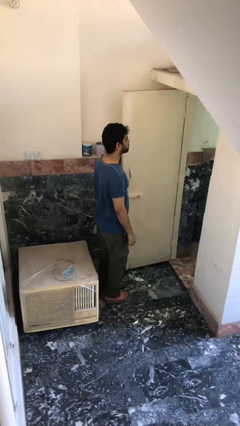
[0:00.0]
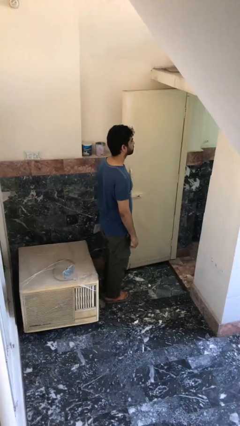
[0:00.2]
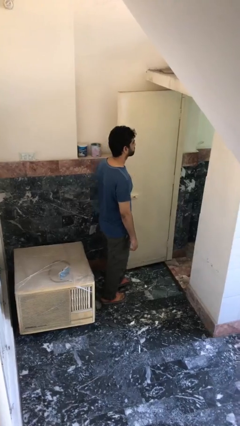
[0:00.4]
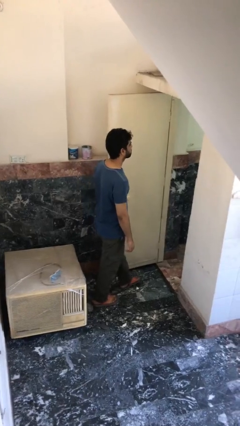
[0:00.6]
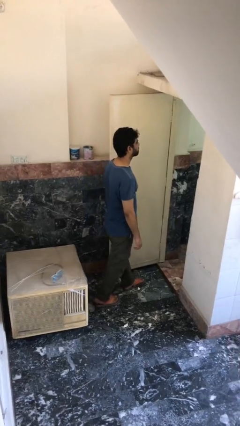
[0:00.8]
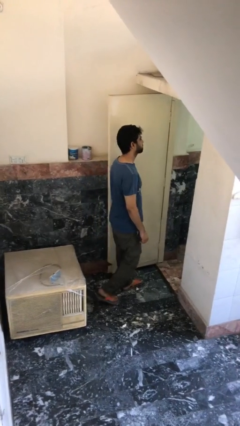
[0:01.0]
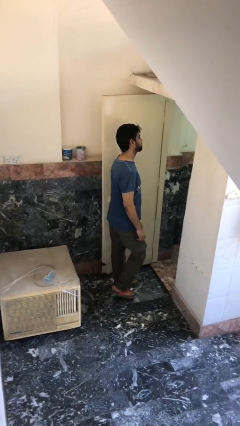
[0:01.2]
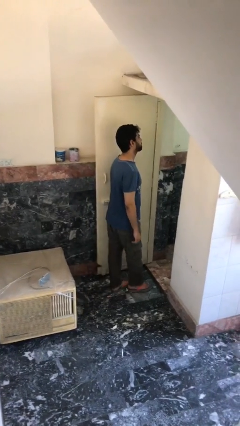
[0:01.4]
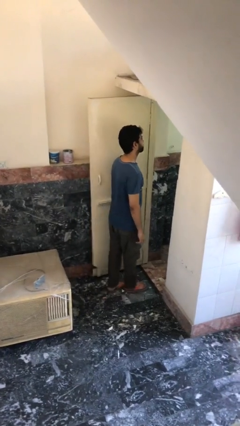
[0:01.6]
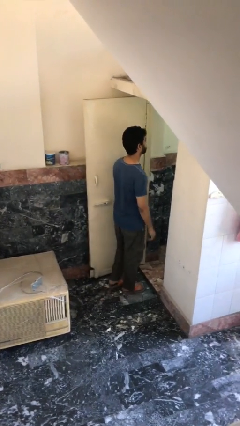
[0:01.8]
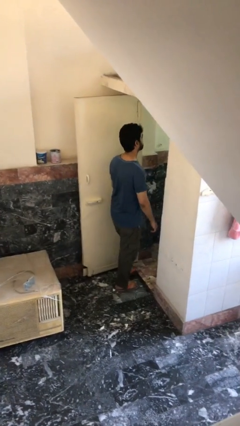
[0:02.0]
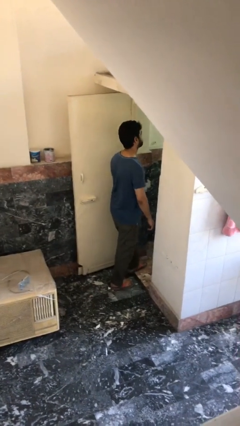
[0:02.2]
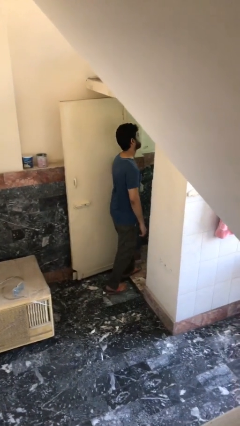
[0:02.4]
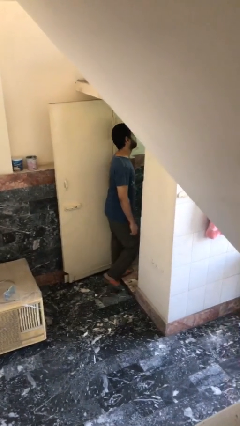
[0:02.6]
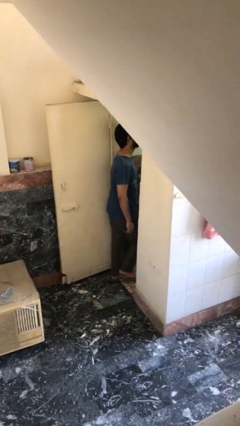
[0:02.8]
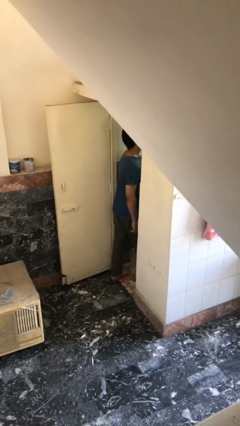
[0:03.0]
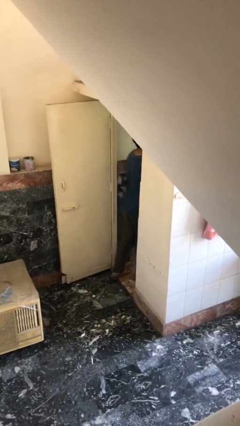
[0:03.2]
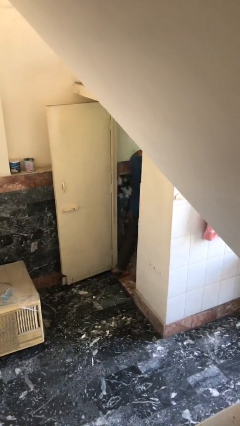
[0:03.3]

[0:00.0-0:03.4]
person exits scene through structure

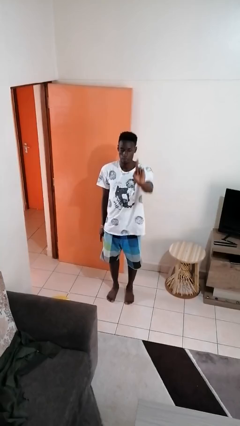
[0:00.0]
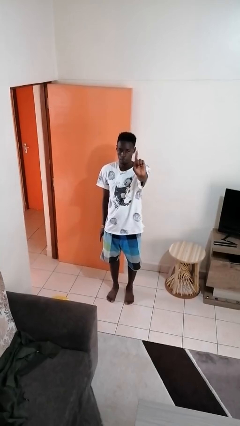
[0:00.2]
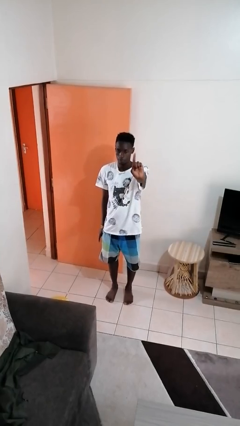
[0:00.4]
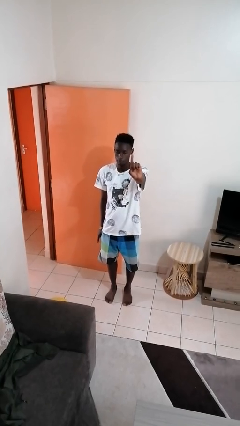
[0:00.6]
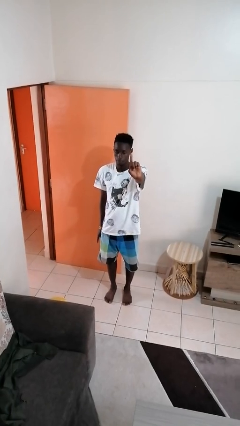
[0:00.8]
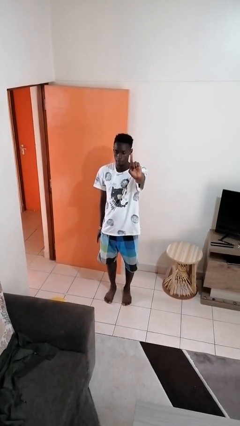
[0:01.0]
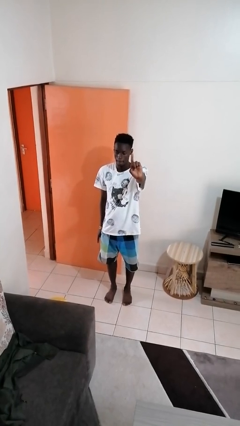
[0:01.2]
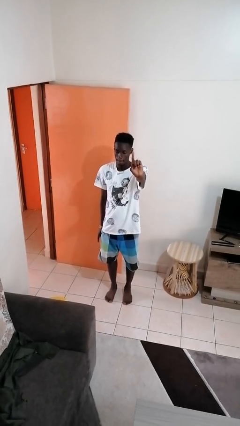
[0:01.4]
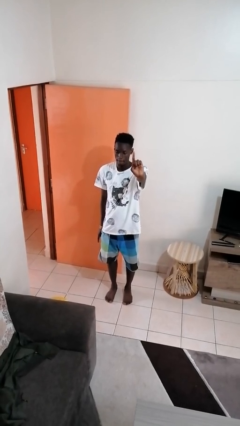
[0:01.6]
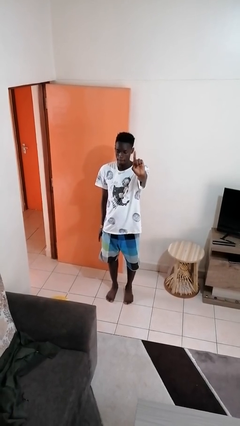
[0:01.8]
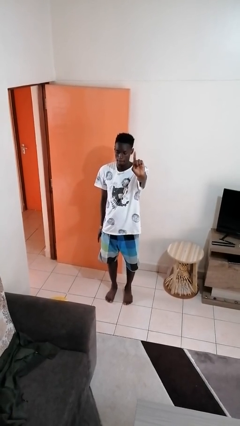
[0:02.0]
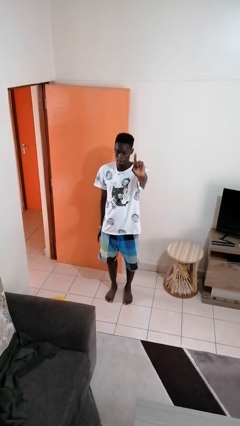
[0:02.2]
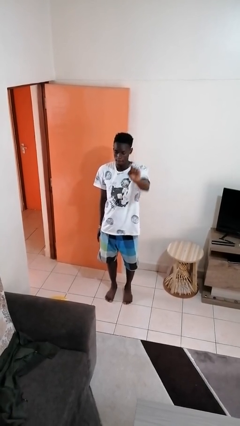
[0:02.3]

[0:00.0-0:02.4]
person gestures number one

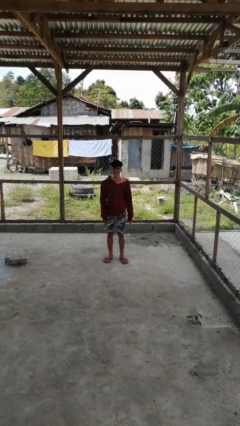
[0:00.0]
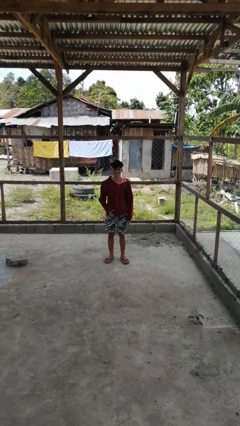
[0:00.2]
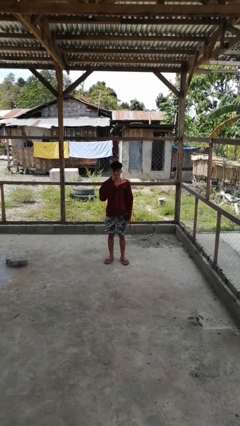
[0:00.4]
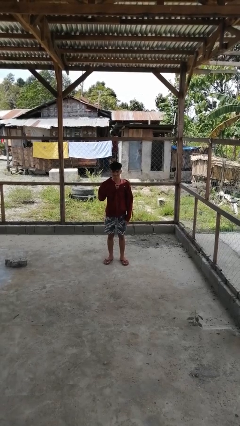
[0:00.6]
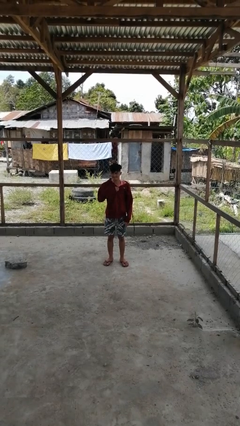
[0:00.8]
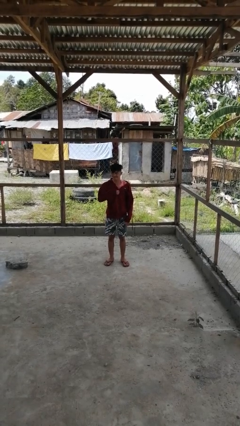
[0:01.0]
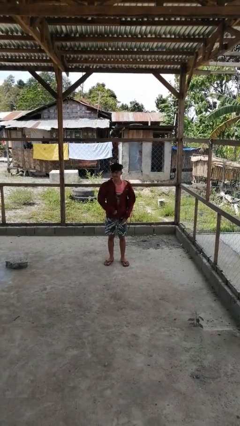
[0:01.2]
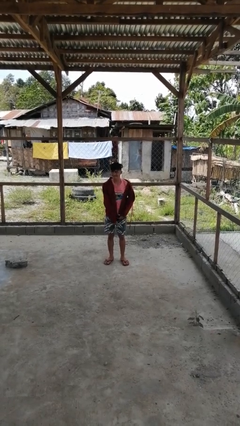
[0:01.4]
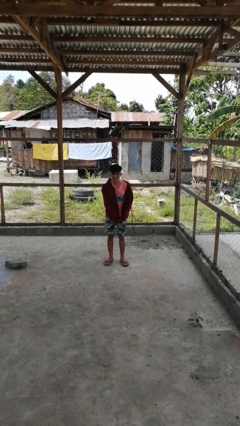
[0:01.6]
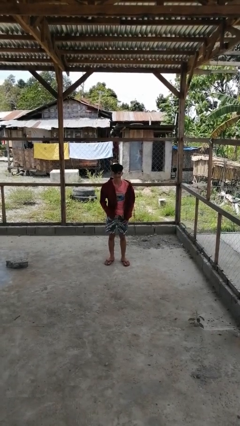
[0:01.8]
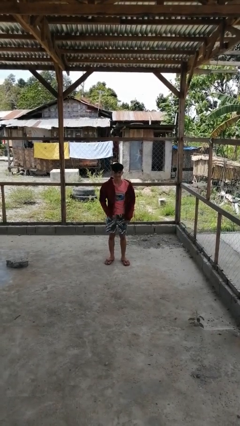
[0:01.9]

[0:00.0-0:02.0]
person unzips jacket

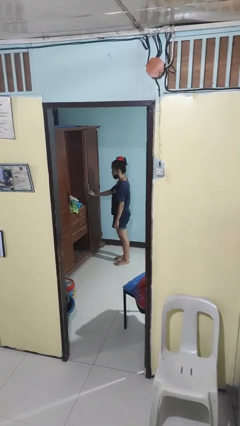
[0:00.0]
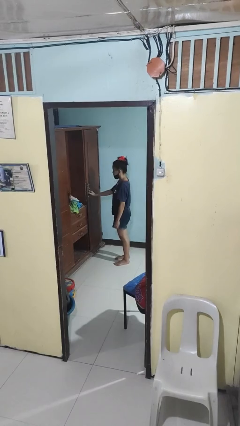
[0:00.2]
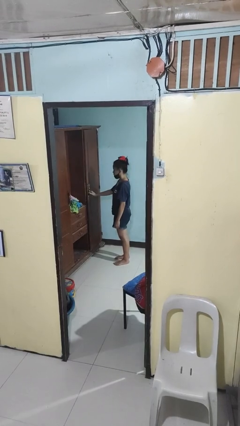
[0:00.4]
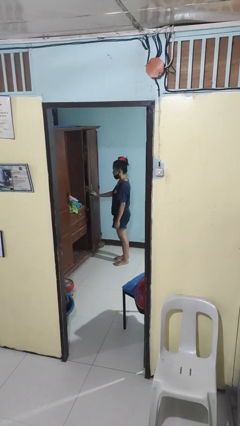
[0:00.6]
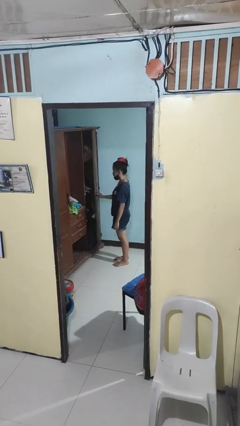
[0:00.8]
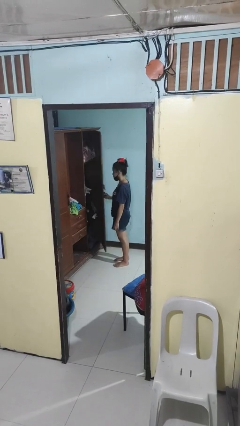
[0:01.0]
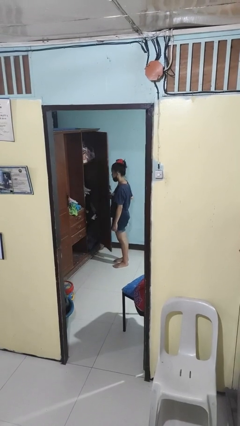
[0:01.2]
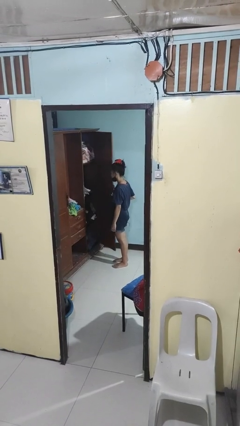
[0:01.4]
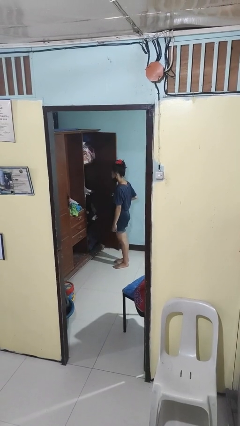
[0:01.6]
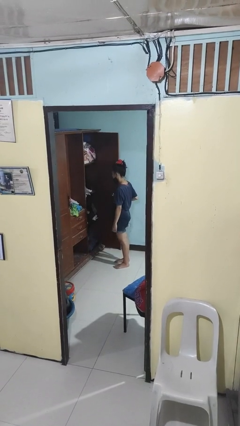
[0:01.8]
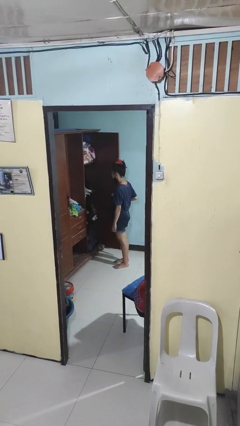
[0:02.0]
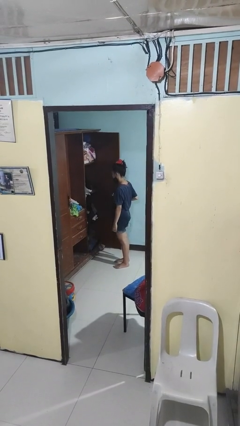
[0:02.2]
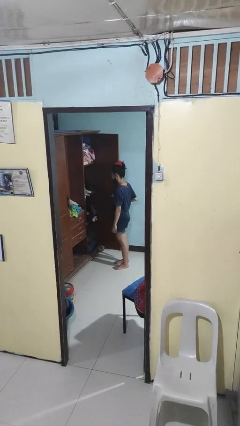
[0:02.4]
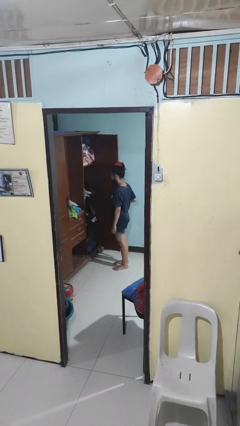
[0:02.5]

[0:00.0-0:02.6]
person opens closet door

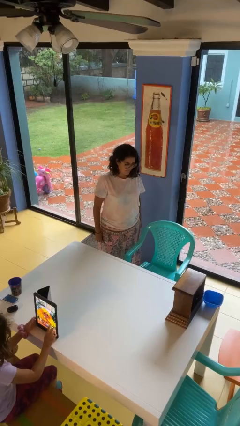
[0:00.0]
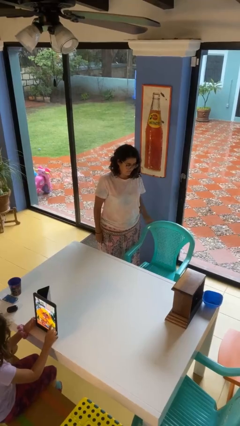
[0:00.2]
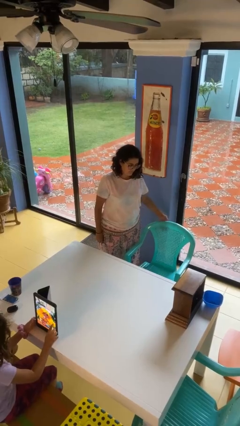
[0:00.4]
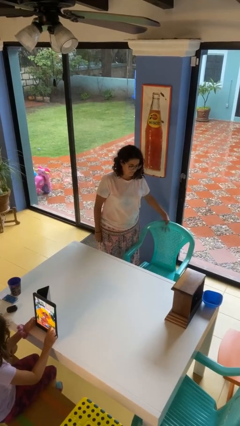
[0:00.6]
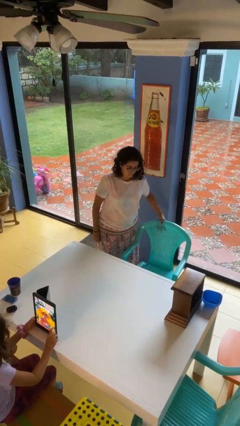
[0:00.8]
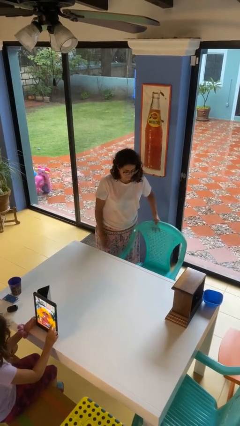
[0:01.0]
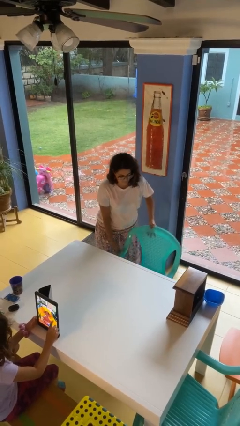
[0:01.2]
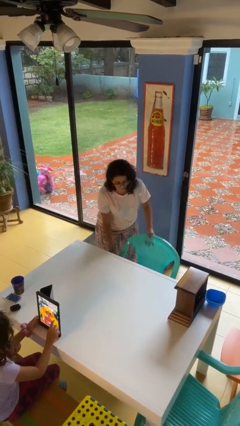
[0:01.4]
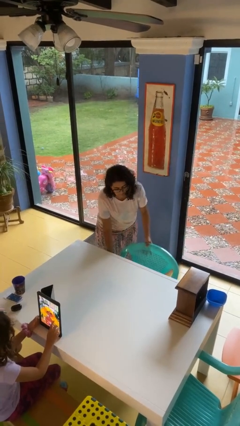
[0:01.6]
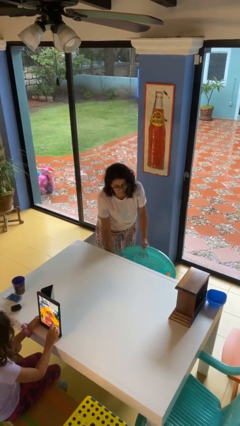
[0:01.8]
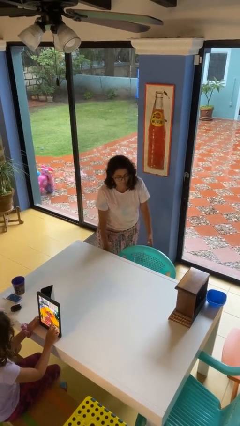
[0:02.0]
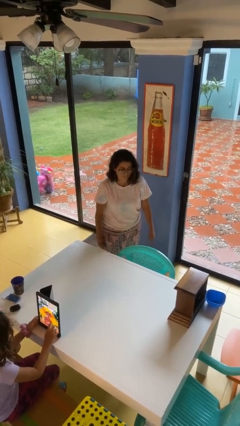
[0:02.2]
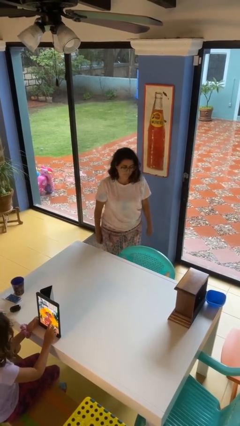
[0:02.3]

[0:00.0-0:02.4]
person pushes in chair

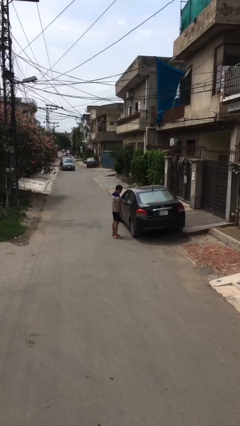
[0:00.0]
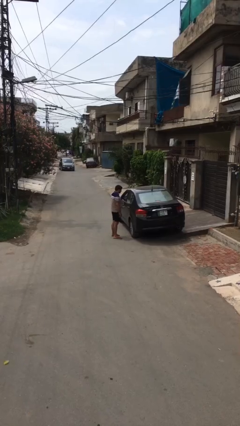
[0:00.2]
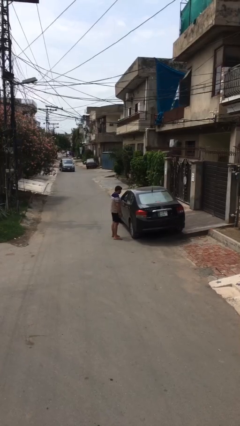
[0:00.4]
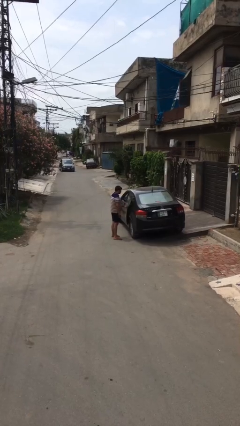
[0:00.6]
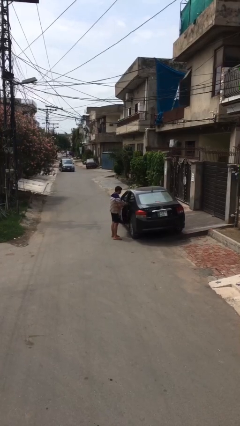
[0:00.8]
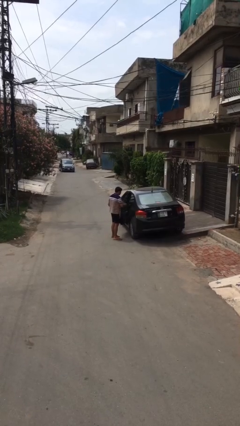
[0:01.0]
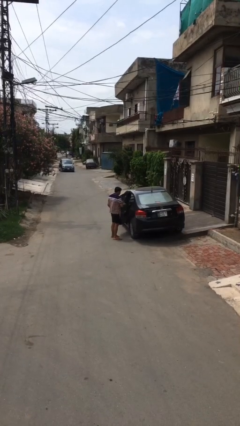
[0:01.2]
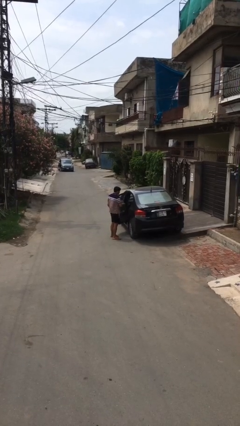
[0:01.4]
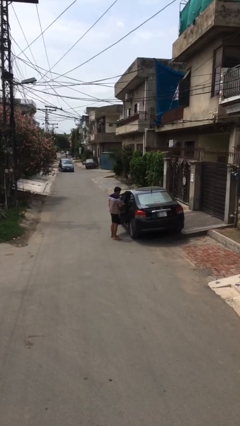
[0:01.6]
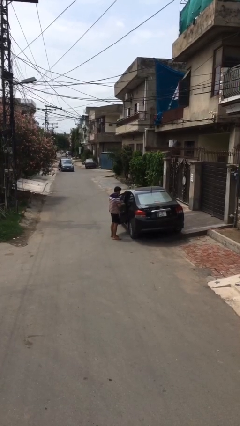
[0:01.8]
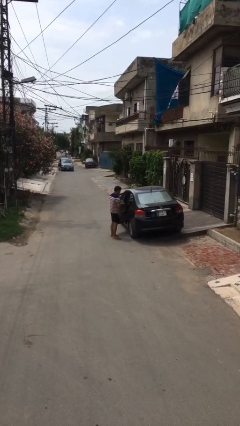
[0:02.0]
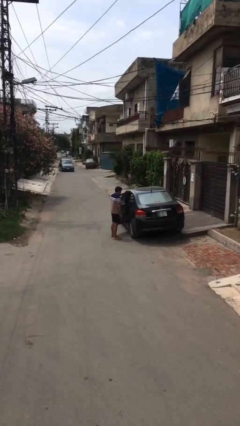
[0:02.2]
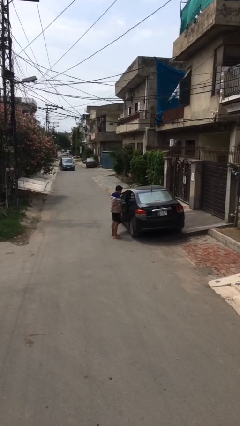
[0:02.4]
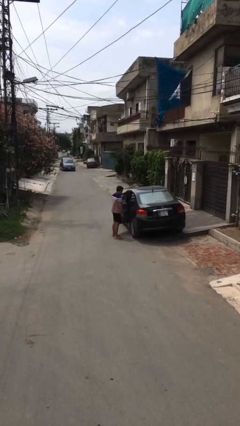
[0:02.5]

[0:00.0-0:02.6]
person opens car door

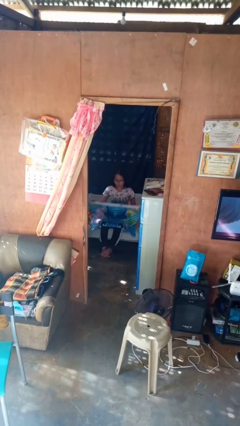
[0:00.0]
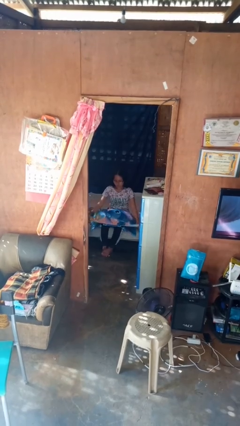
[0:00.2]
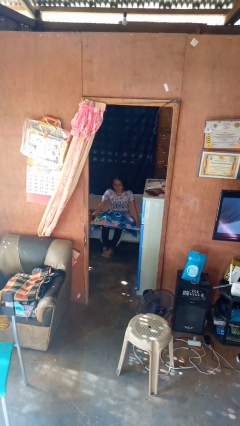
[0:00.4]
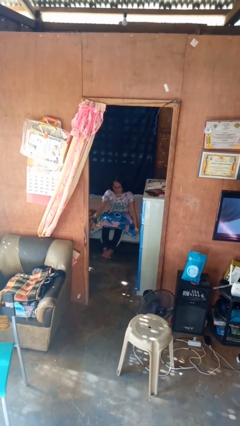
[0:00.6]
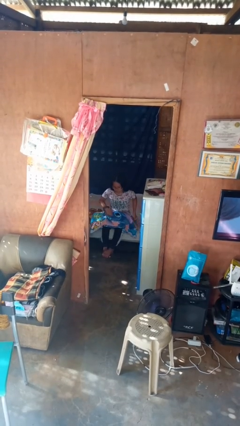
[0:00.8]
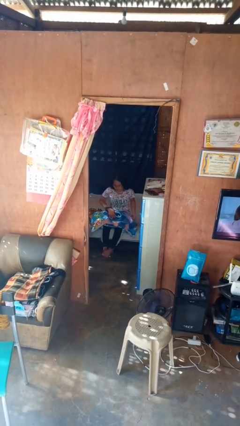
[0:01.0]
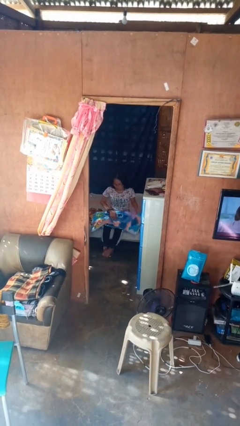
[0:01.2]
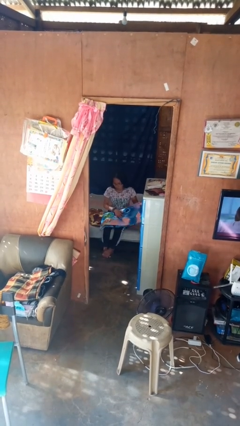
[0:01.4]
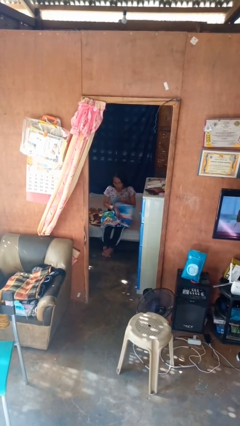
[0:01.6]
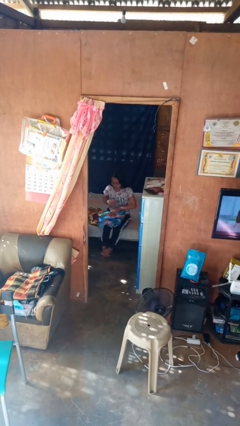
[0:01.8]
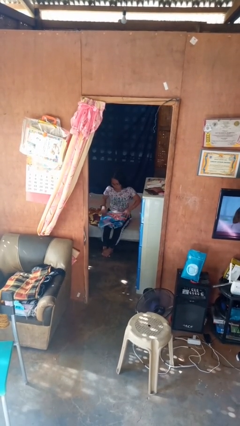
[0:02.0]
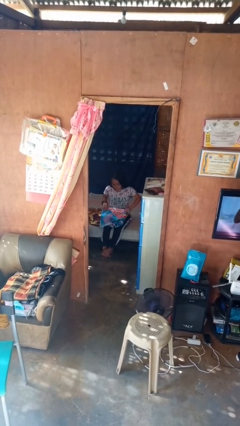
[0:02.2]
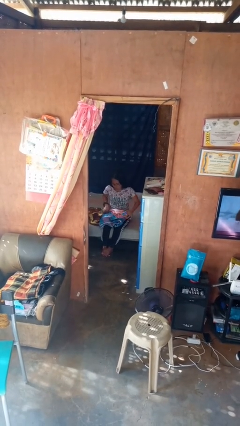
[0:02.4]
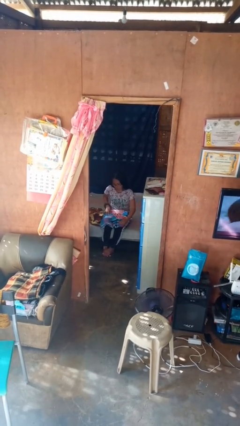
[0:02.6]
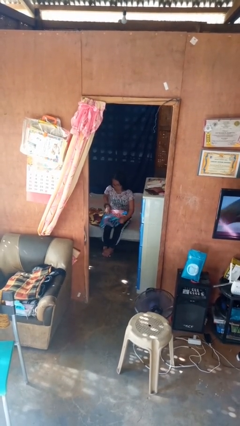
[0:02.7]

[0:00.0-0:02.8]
person folds blanket
